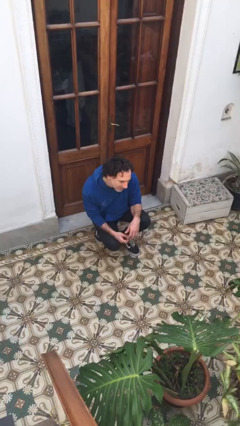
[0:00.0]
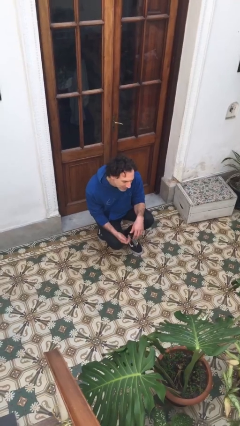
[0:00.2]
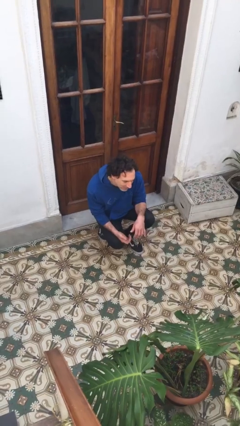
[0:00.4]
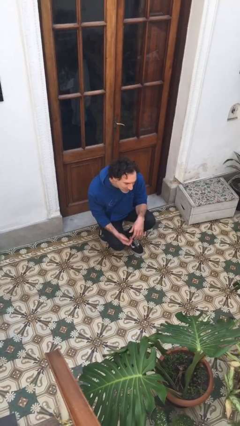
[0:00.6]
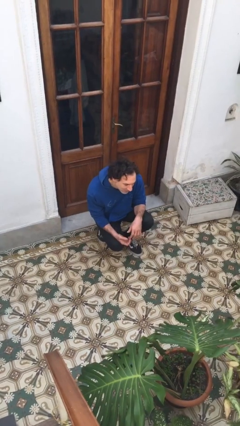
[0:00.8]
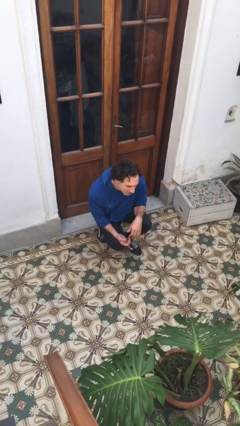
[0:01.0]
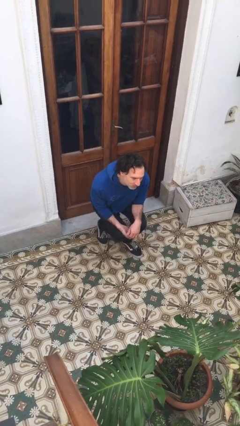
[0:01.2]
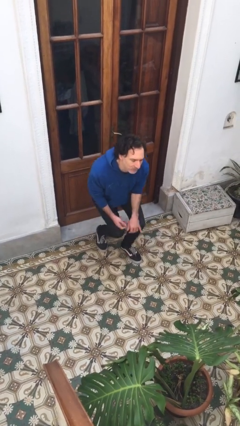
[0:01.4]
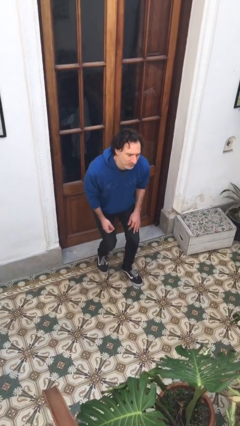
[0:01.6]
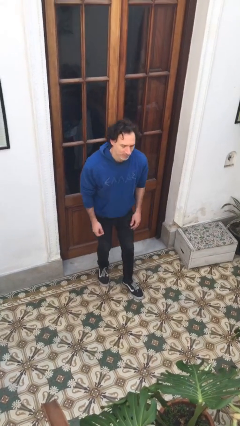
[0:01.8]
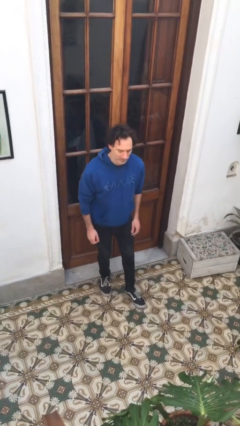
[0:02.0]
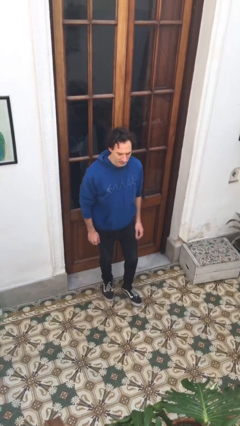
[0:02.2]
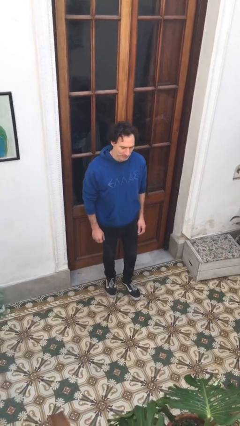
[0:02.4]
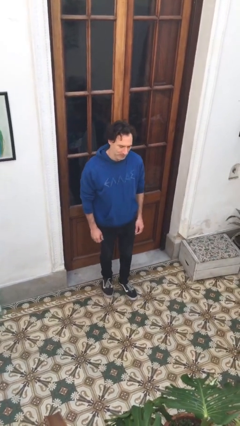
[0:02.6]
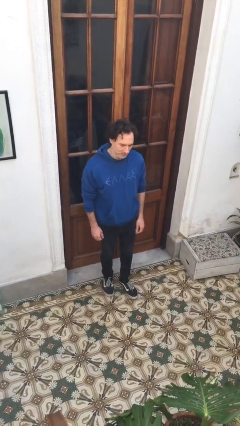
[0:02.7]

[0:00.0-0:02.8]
person stands up

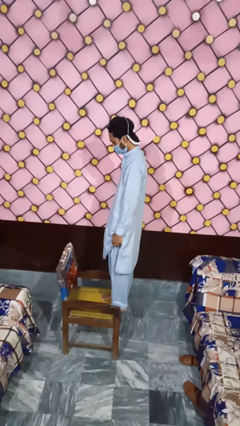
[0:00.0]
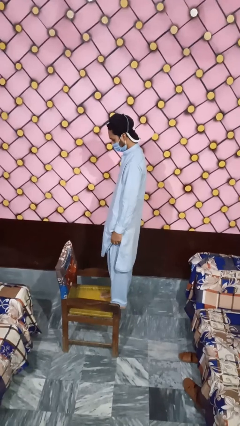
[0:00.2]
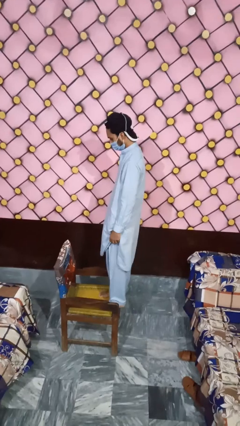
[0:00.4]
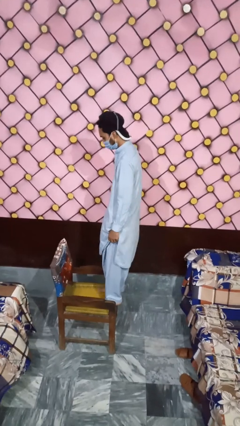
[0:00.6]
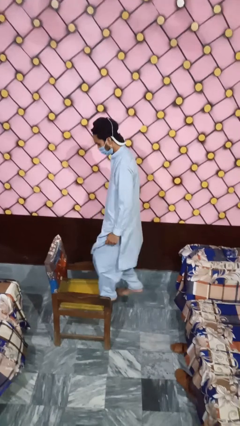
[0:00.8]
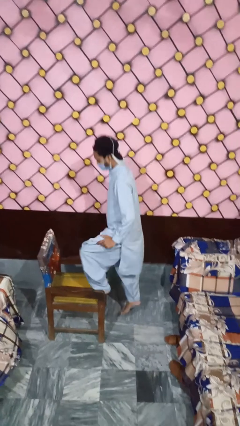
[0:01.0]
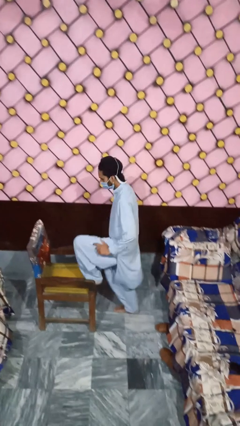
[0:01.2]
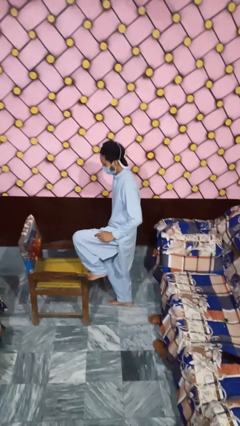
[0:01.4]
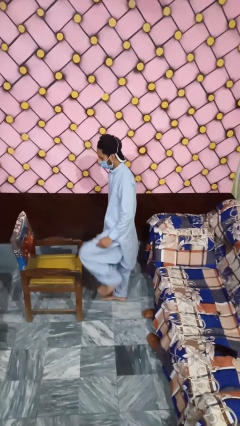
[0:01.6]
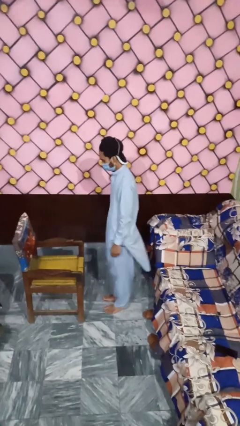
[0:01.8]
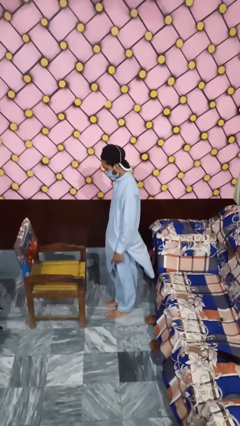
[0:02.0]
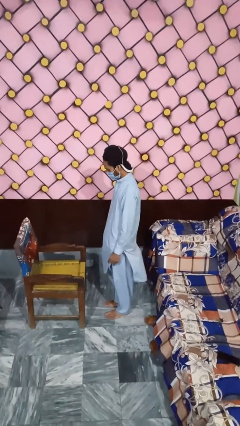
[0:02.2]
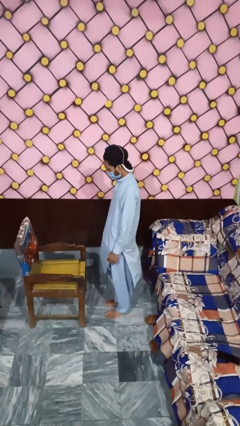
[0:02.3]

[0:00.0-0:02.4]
person climbs off chair

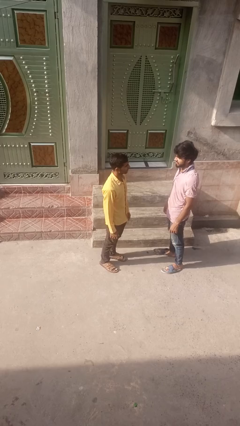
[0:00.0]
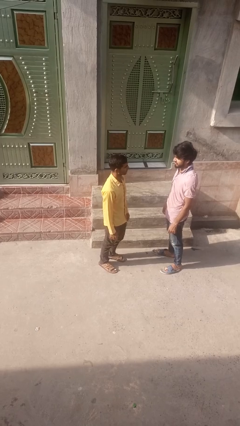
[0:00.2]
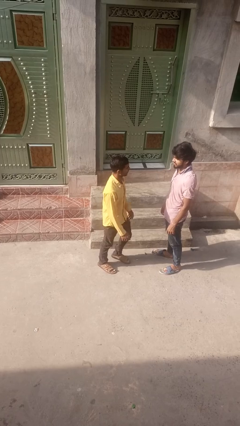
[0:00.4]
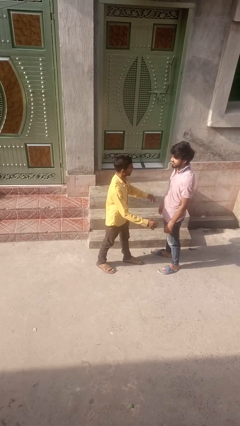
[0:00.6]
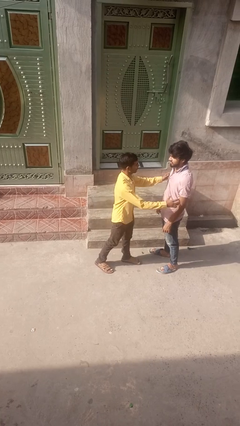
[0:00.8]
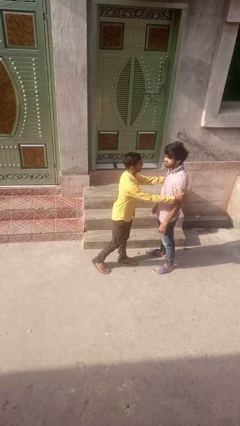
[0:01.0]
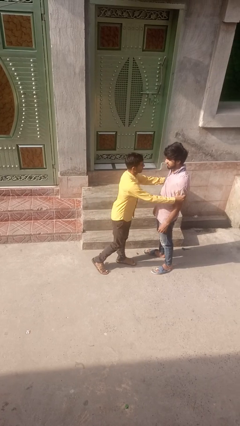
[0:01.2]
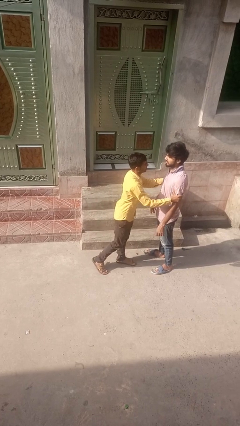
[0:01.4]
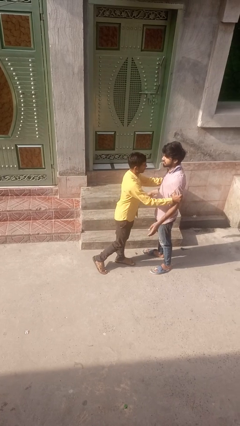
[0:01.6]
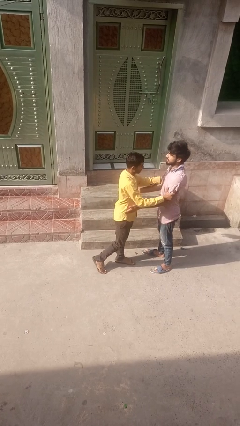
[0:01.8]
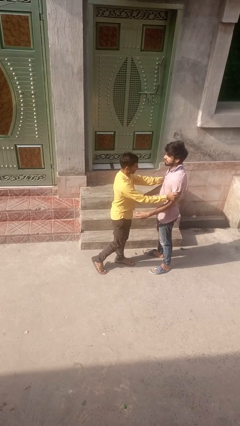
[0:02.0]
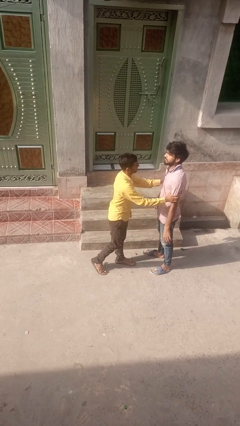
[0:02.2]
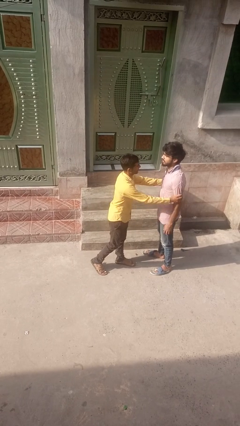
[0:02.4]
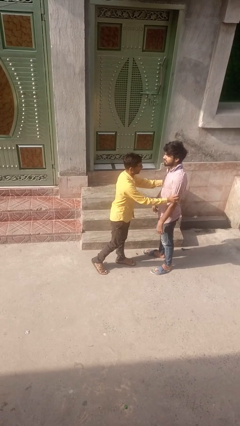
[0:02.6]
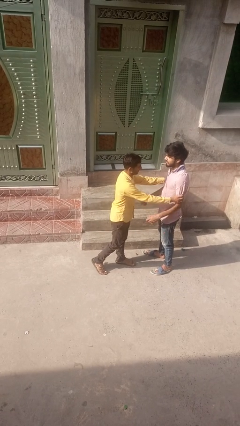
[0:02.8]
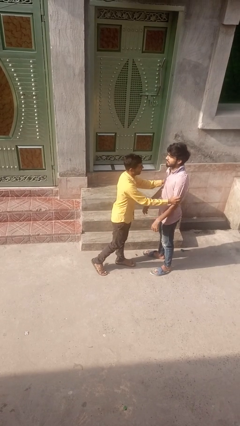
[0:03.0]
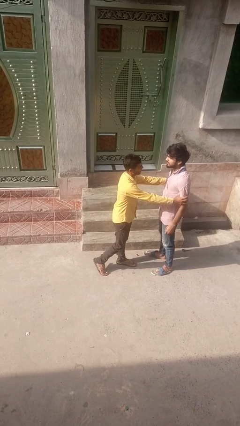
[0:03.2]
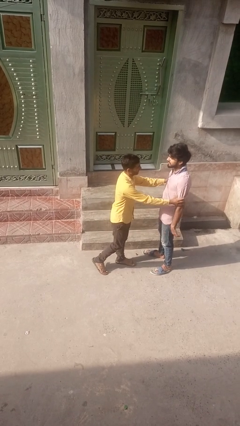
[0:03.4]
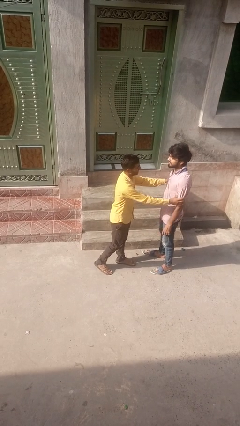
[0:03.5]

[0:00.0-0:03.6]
person grabs person by bicep

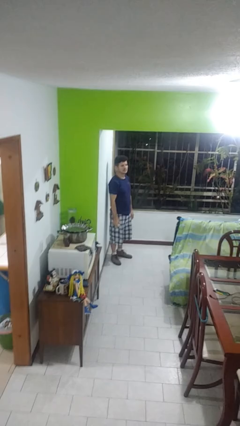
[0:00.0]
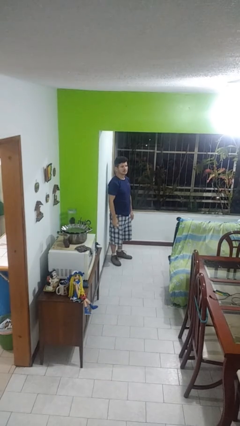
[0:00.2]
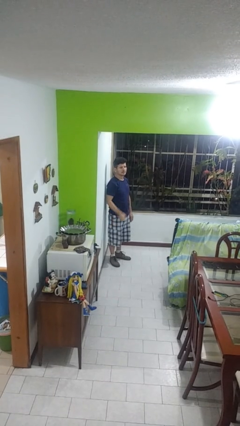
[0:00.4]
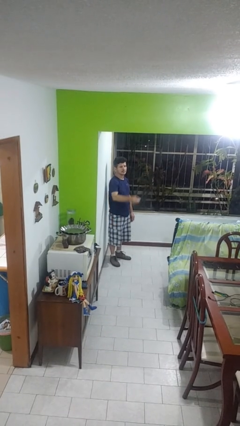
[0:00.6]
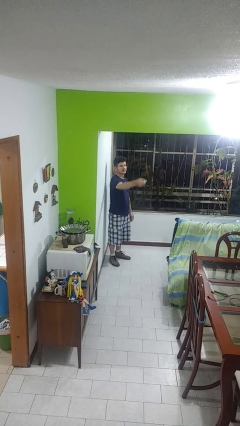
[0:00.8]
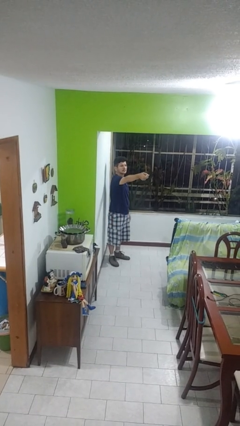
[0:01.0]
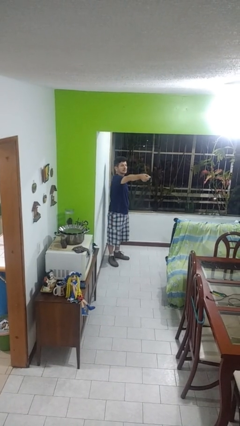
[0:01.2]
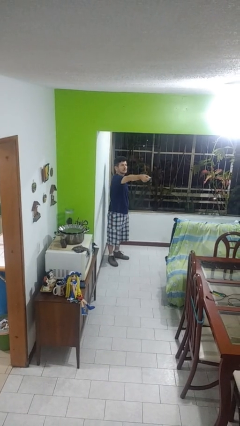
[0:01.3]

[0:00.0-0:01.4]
person uses television remote

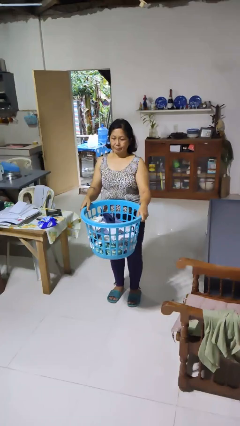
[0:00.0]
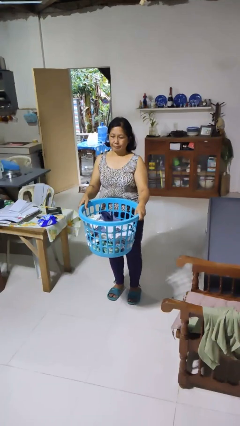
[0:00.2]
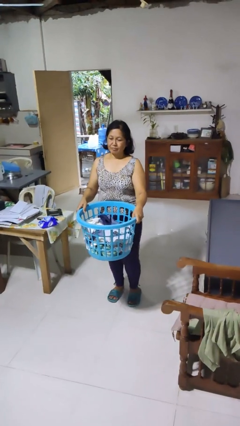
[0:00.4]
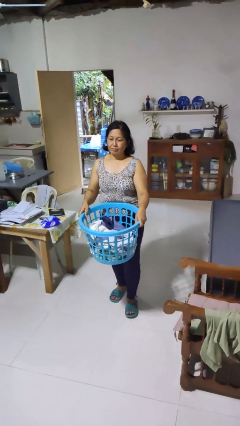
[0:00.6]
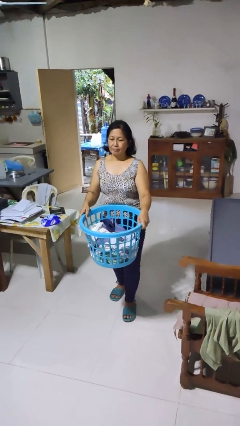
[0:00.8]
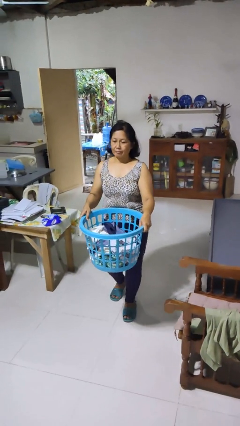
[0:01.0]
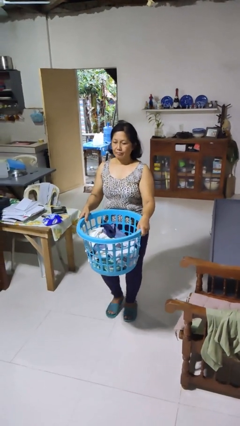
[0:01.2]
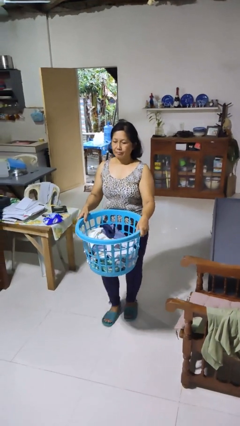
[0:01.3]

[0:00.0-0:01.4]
person carries laundry basket

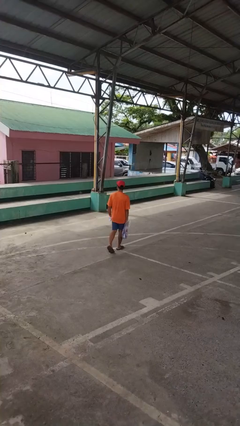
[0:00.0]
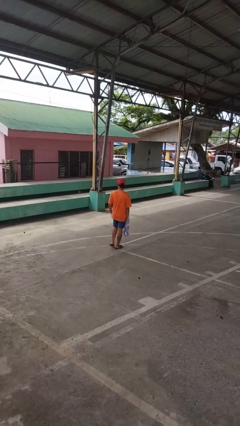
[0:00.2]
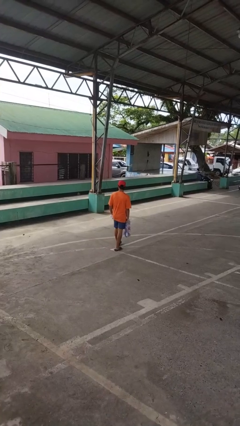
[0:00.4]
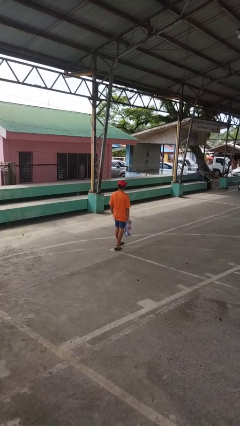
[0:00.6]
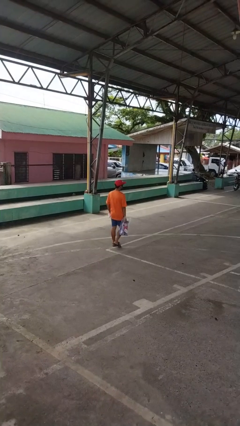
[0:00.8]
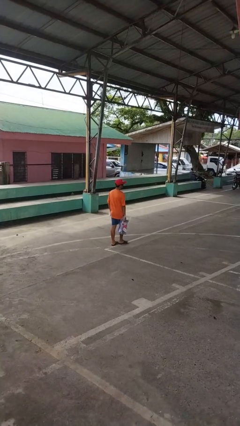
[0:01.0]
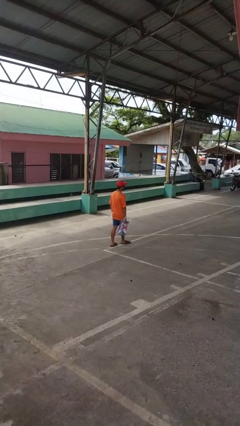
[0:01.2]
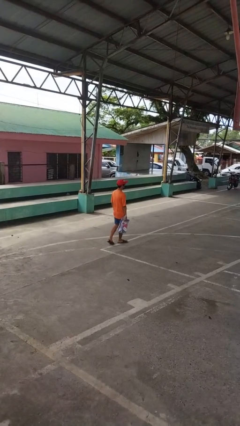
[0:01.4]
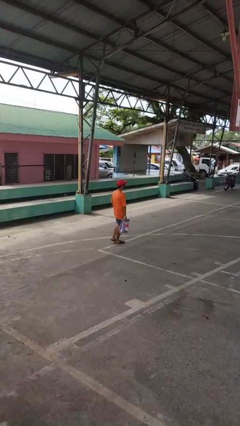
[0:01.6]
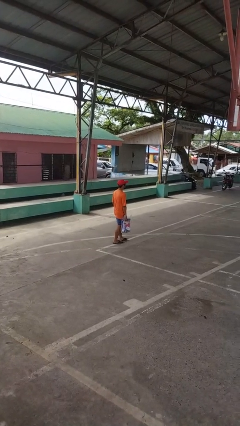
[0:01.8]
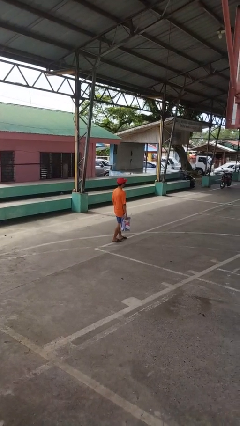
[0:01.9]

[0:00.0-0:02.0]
person carries groceries

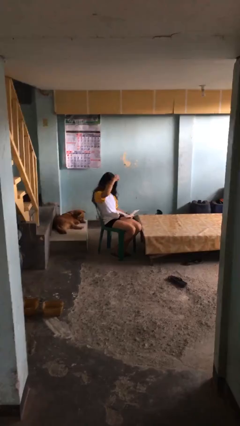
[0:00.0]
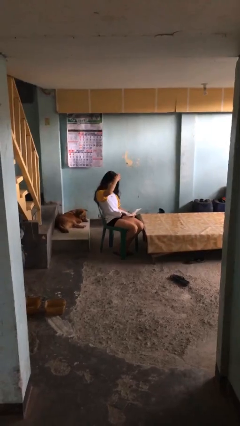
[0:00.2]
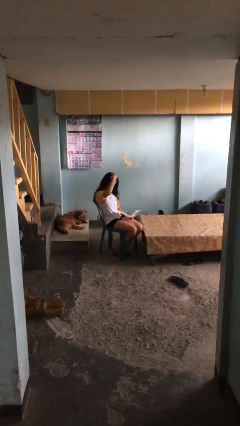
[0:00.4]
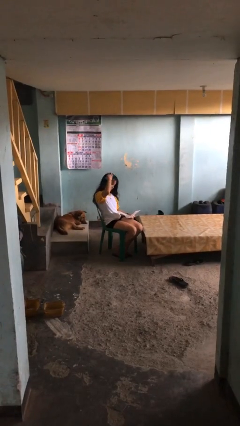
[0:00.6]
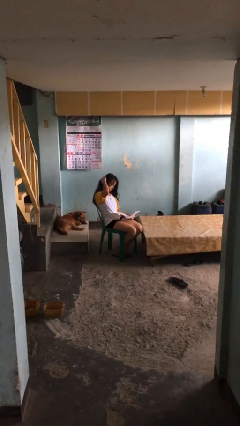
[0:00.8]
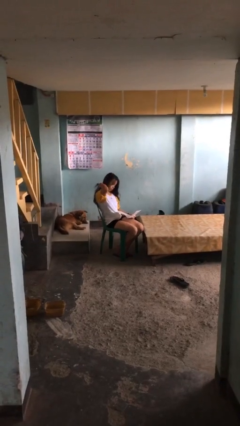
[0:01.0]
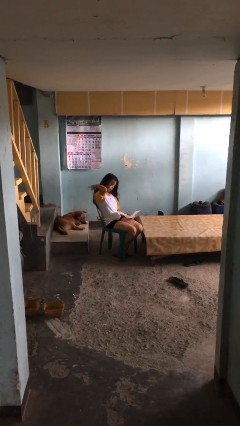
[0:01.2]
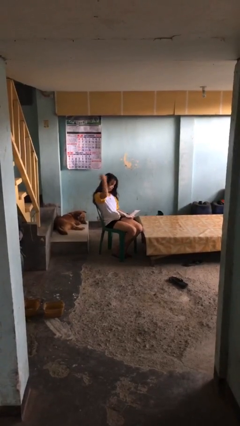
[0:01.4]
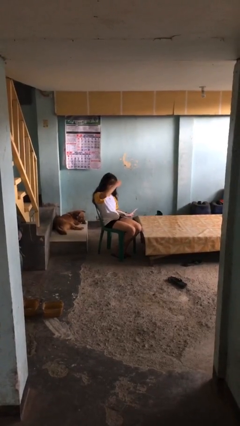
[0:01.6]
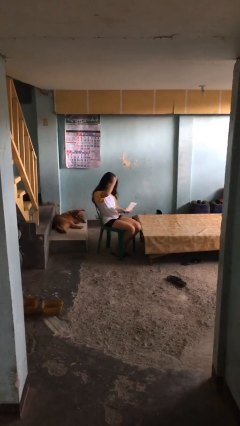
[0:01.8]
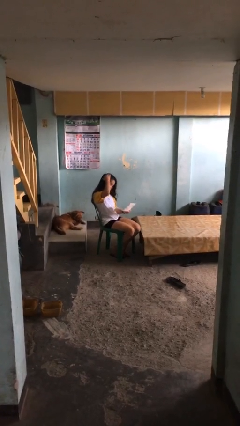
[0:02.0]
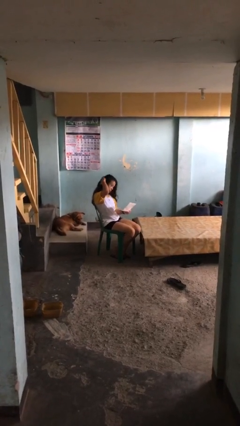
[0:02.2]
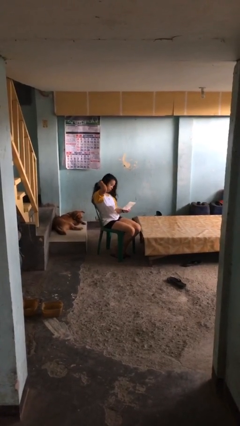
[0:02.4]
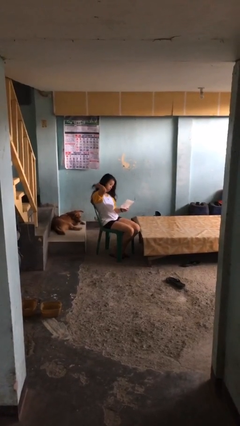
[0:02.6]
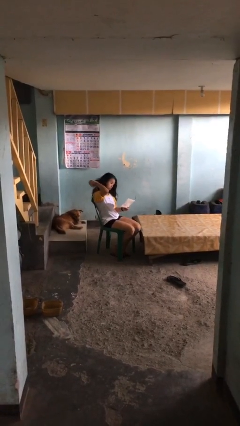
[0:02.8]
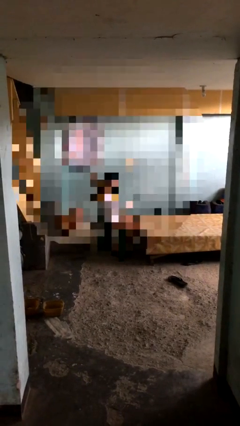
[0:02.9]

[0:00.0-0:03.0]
person reads document

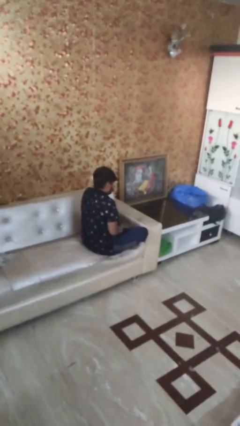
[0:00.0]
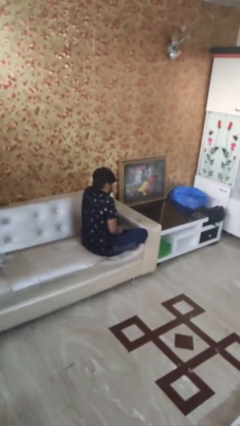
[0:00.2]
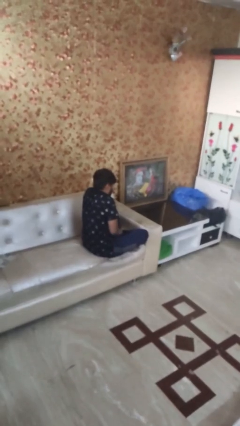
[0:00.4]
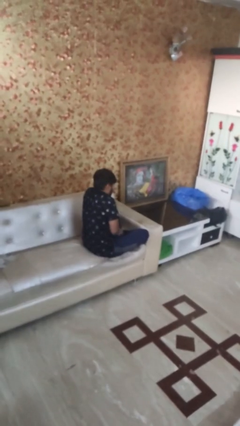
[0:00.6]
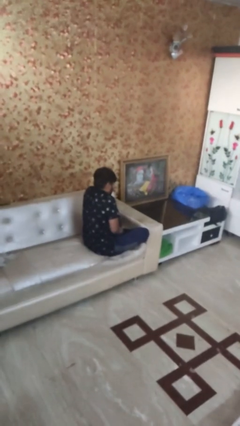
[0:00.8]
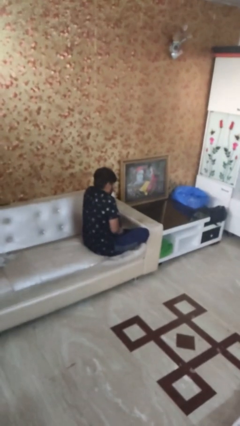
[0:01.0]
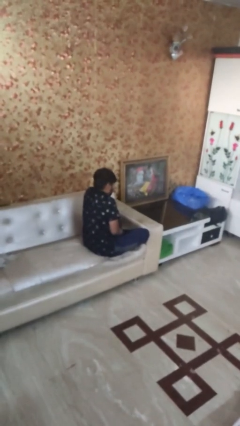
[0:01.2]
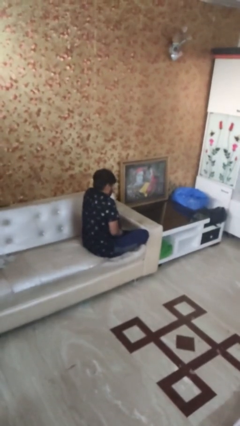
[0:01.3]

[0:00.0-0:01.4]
person shrugs